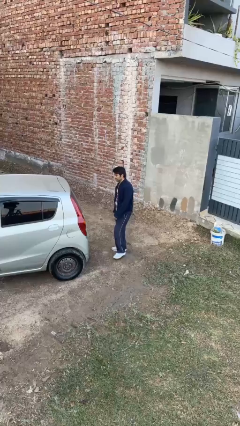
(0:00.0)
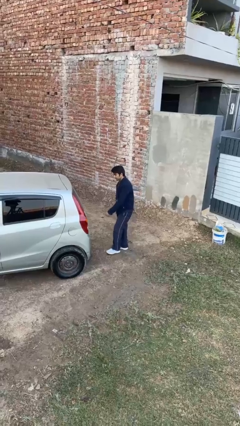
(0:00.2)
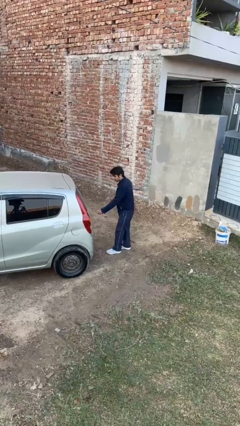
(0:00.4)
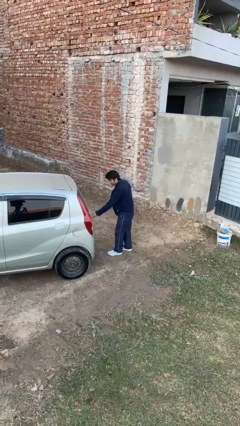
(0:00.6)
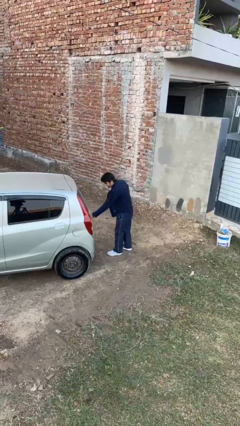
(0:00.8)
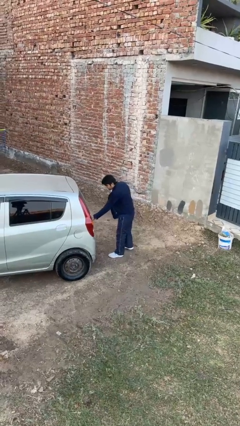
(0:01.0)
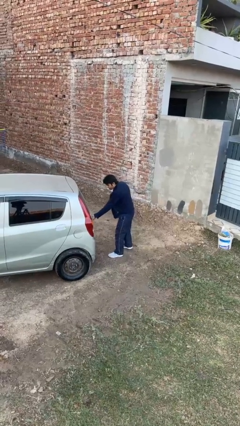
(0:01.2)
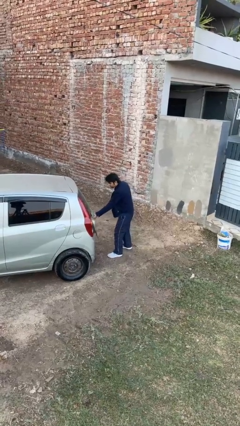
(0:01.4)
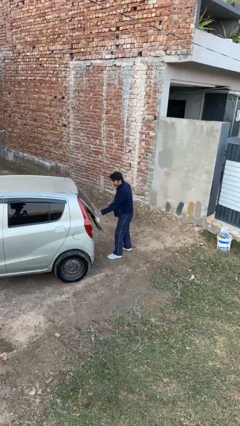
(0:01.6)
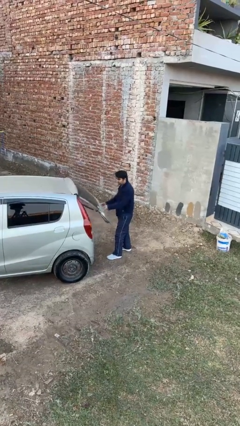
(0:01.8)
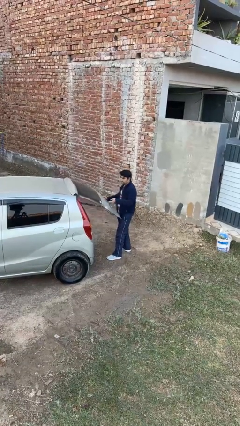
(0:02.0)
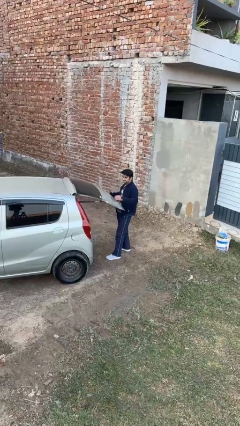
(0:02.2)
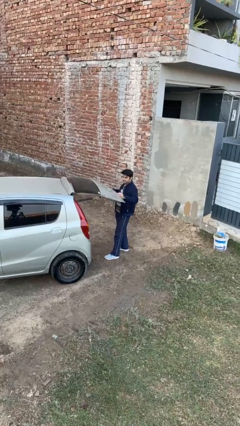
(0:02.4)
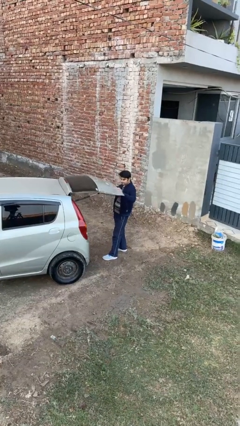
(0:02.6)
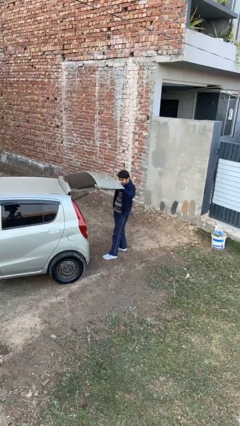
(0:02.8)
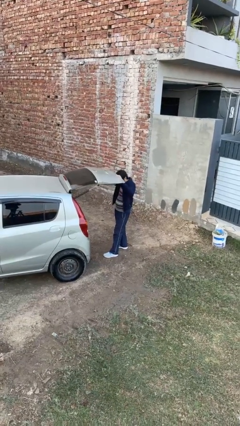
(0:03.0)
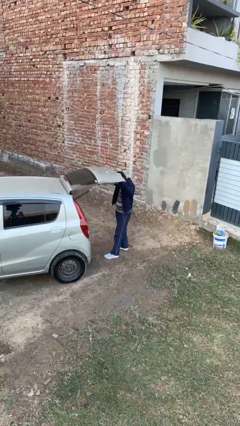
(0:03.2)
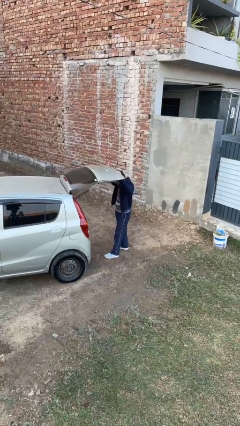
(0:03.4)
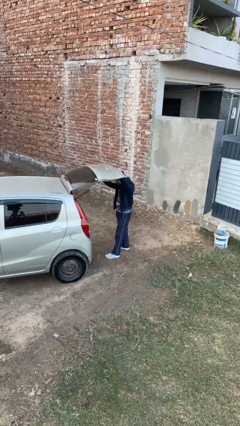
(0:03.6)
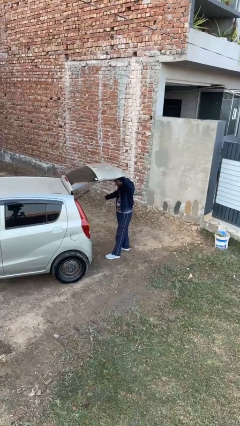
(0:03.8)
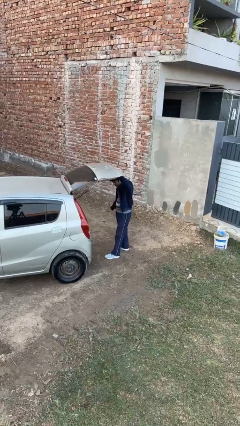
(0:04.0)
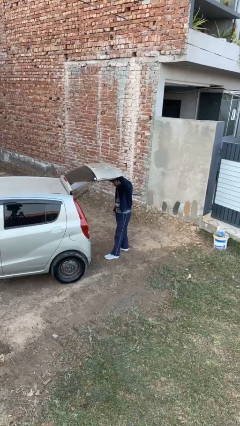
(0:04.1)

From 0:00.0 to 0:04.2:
person opens car trunk

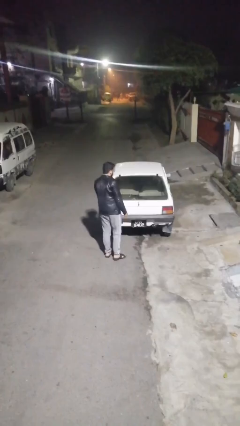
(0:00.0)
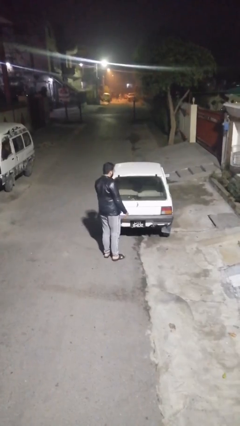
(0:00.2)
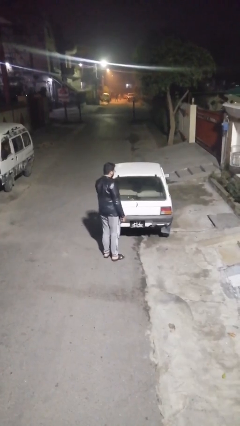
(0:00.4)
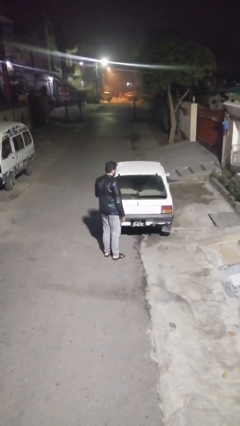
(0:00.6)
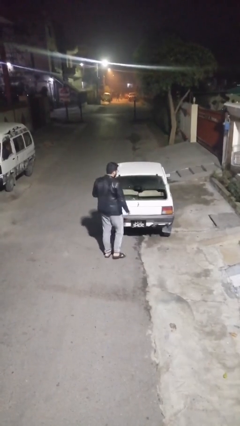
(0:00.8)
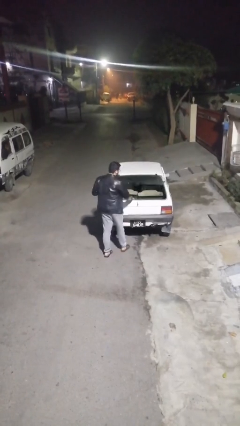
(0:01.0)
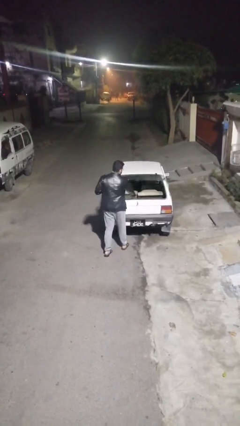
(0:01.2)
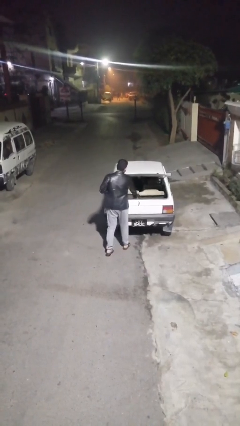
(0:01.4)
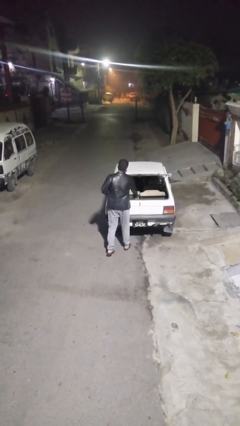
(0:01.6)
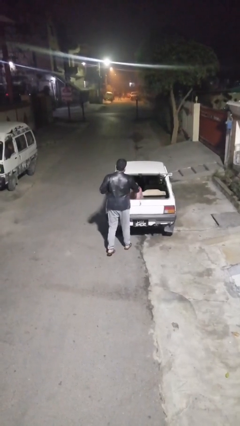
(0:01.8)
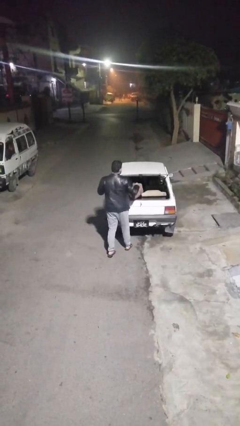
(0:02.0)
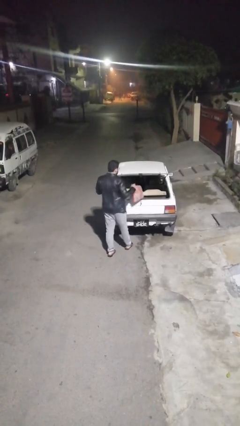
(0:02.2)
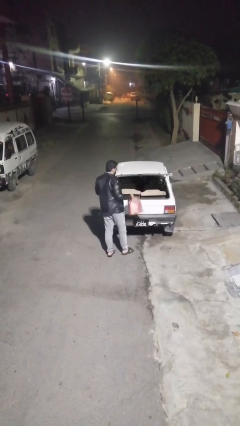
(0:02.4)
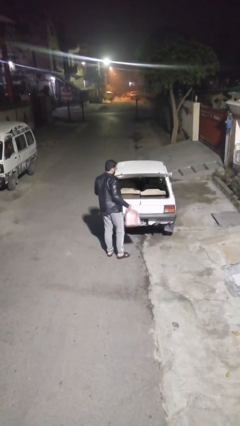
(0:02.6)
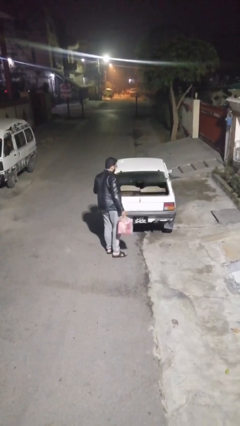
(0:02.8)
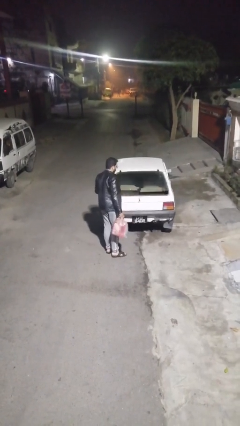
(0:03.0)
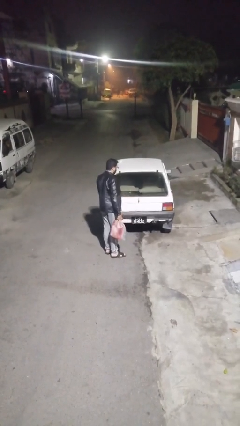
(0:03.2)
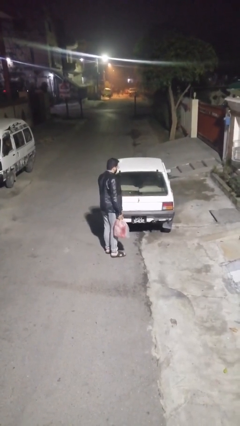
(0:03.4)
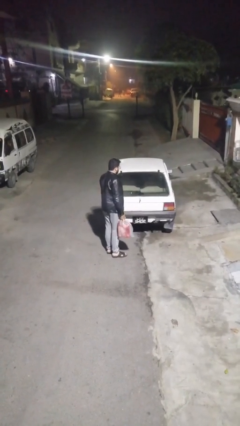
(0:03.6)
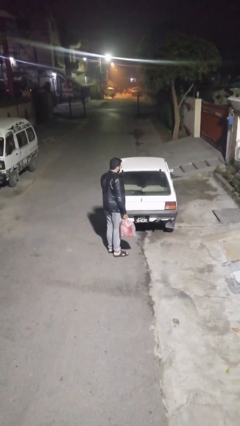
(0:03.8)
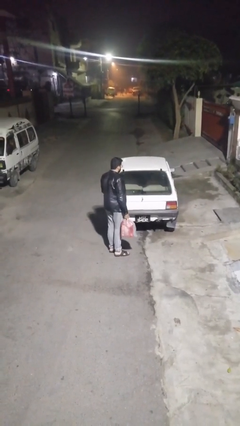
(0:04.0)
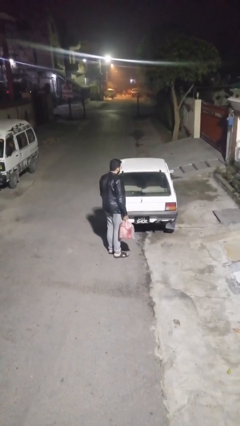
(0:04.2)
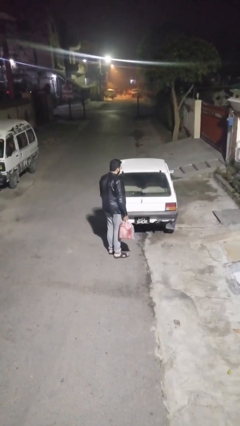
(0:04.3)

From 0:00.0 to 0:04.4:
person unloads car

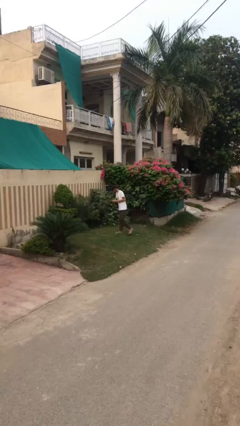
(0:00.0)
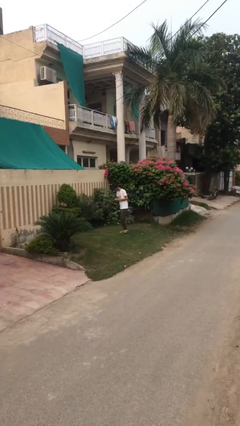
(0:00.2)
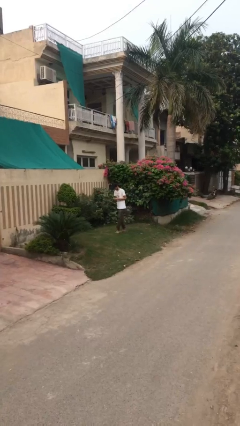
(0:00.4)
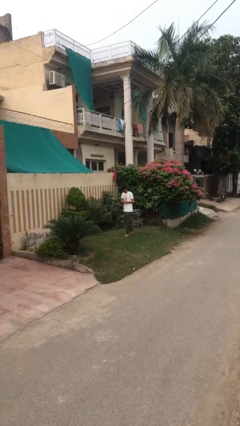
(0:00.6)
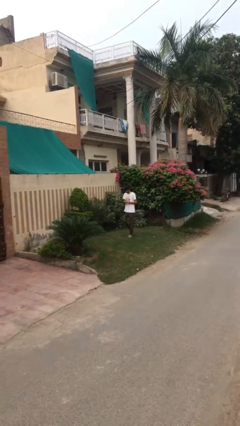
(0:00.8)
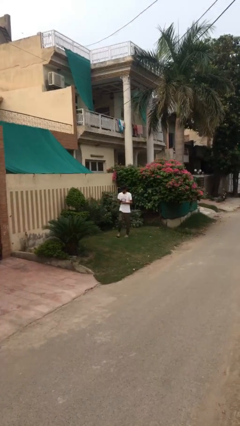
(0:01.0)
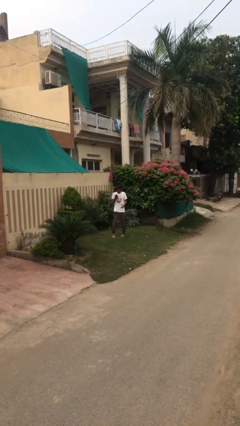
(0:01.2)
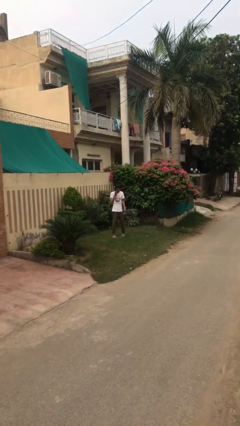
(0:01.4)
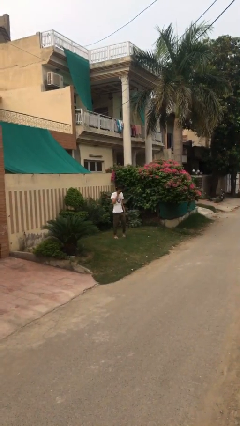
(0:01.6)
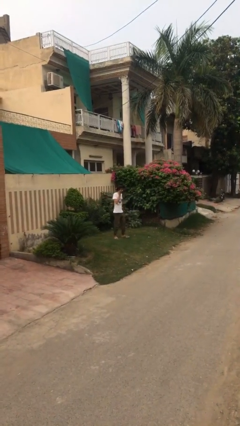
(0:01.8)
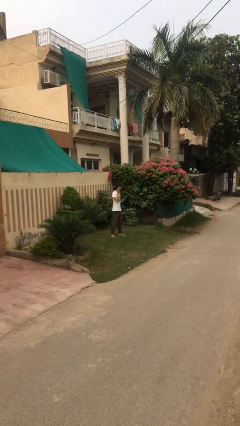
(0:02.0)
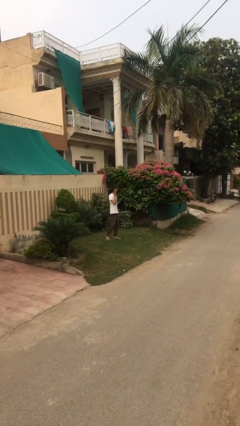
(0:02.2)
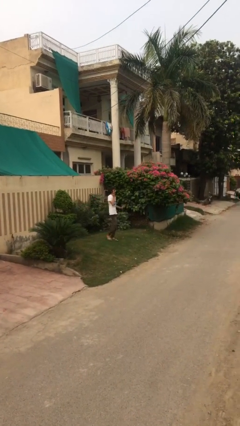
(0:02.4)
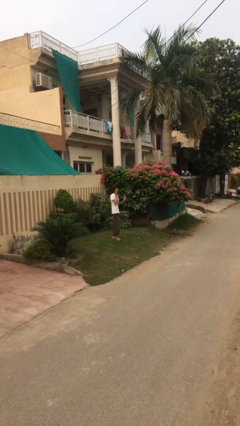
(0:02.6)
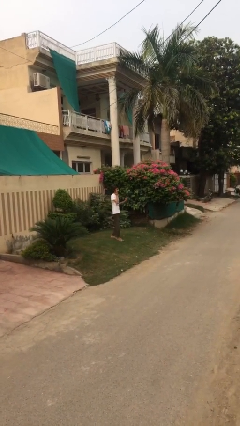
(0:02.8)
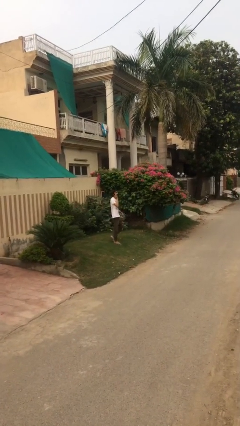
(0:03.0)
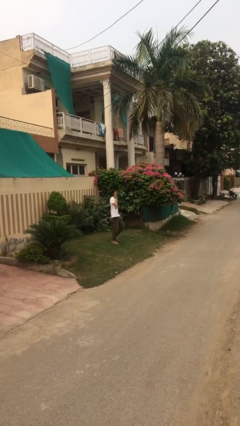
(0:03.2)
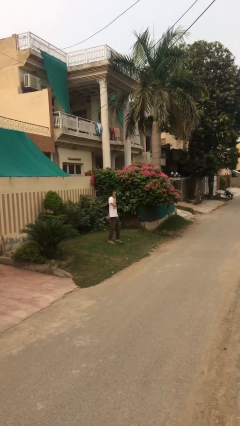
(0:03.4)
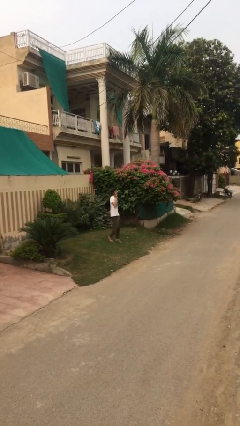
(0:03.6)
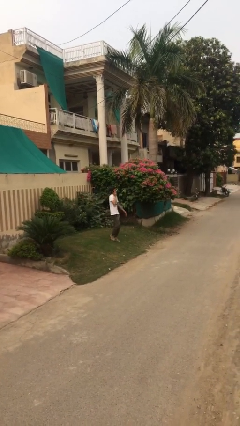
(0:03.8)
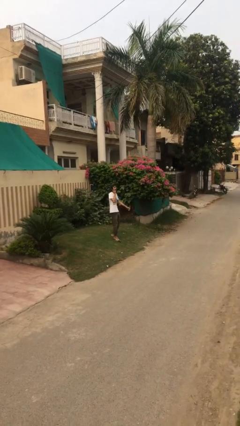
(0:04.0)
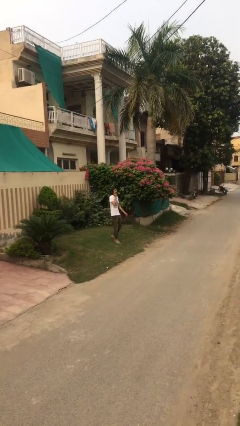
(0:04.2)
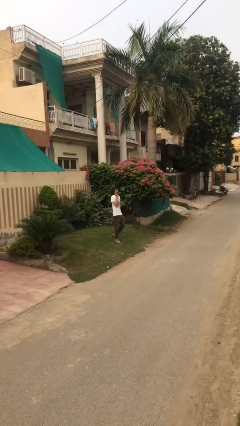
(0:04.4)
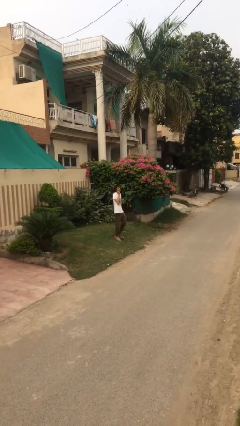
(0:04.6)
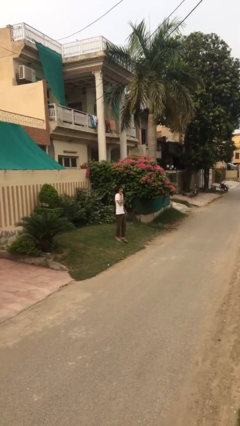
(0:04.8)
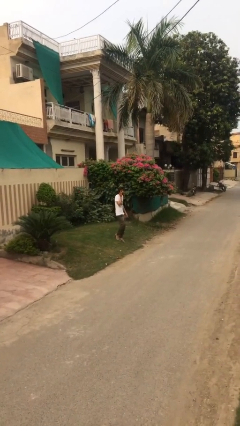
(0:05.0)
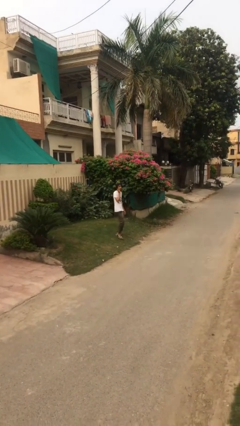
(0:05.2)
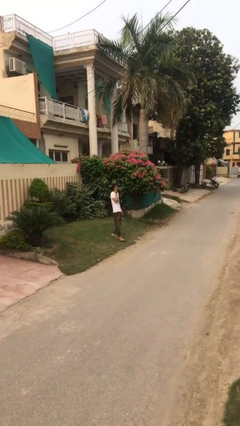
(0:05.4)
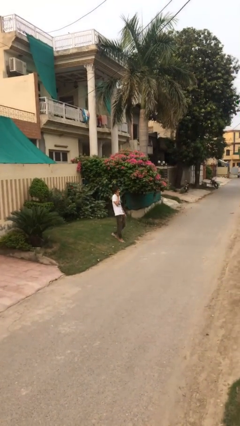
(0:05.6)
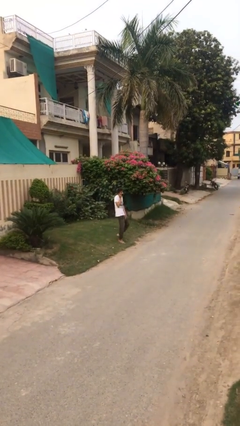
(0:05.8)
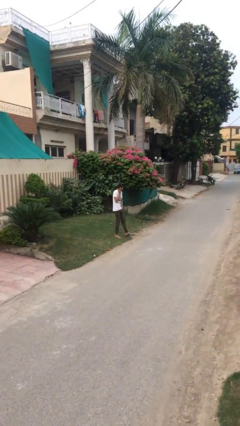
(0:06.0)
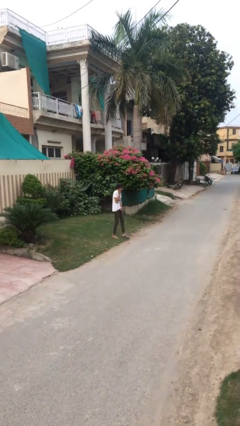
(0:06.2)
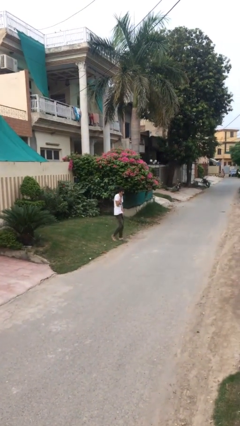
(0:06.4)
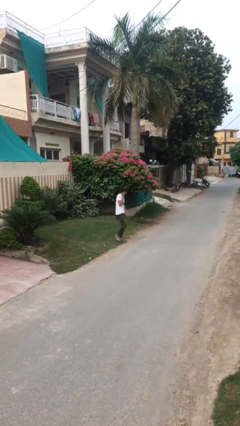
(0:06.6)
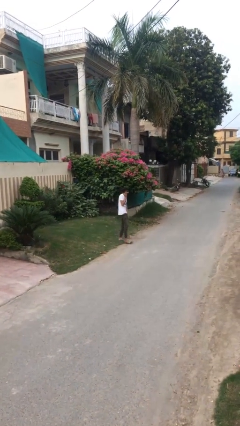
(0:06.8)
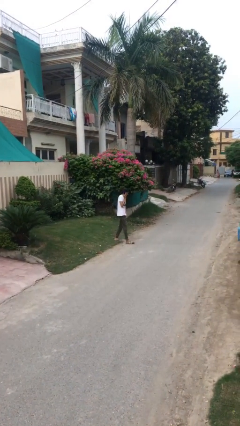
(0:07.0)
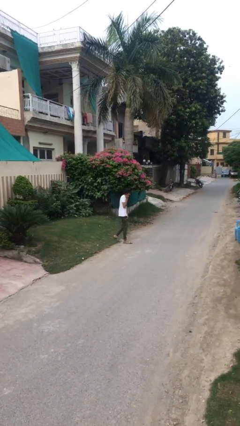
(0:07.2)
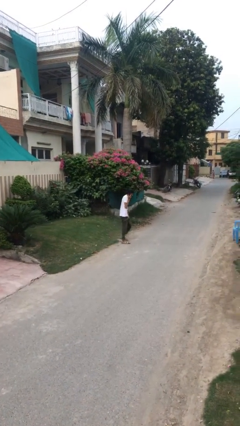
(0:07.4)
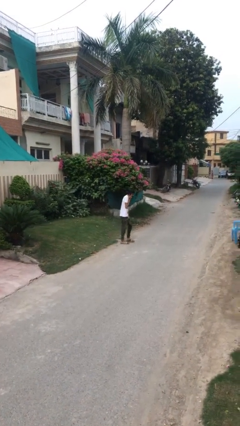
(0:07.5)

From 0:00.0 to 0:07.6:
person talks on phone

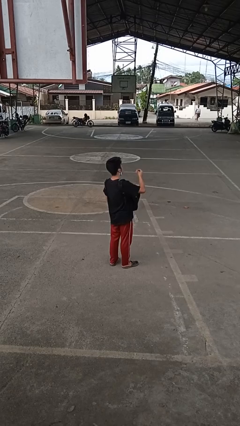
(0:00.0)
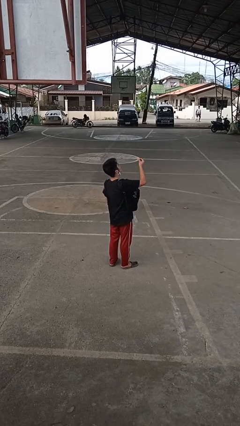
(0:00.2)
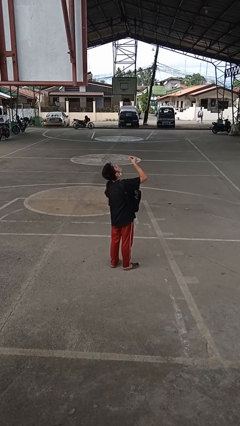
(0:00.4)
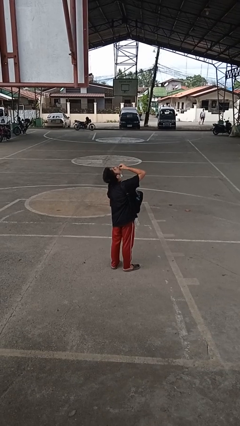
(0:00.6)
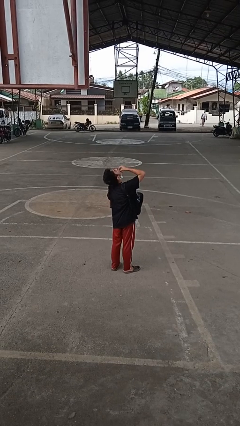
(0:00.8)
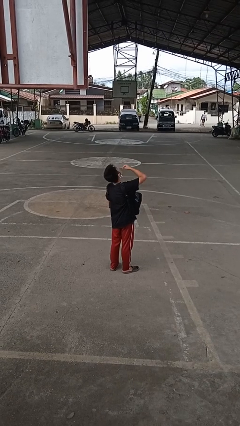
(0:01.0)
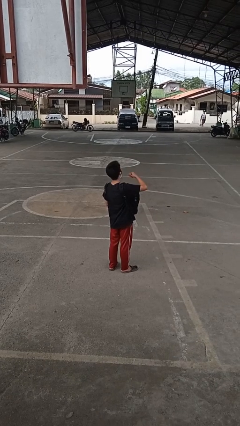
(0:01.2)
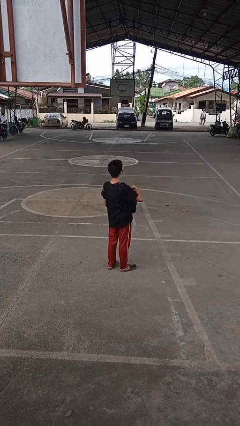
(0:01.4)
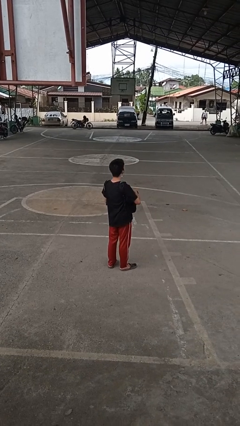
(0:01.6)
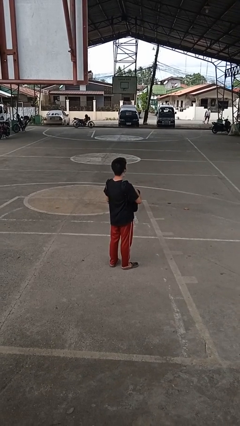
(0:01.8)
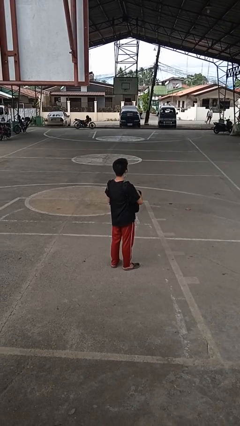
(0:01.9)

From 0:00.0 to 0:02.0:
person eats snack from bag
